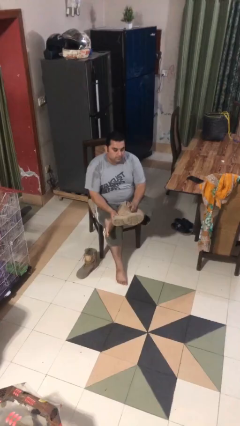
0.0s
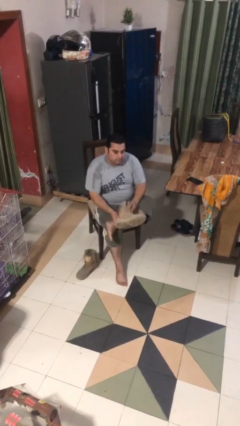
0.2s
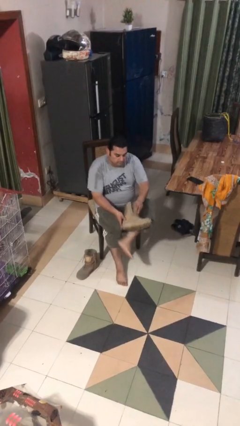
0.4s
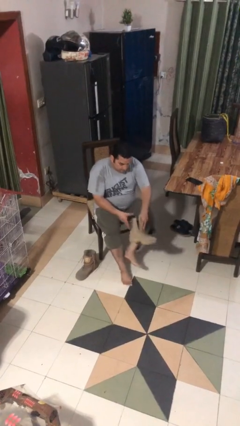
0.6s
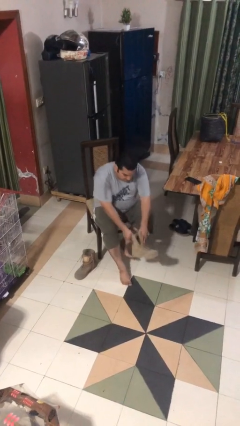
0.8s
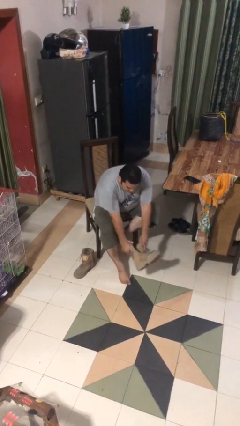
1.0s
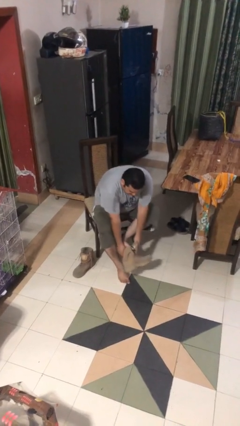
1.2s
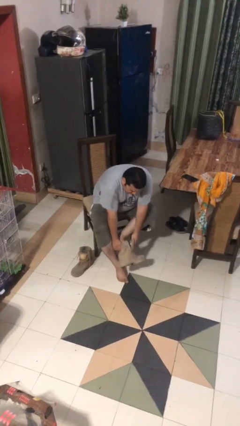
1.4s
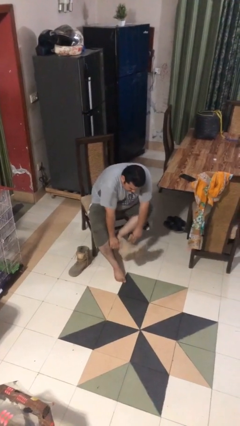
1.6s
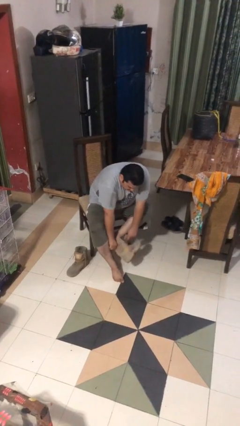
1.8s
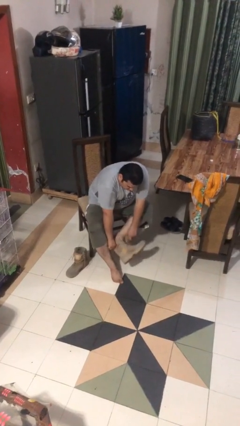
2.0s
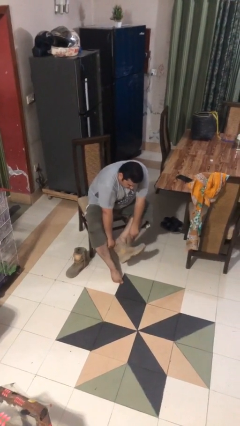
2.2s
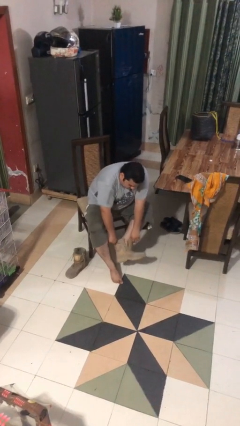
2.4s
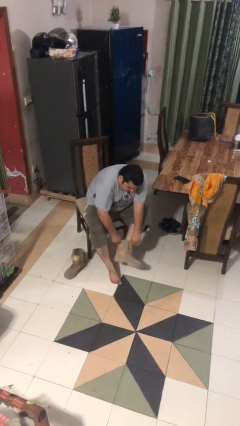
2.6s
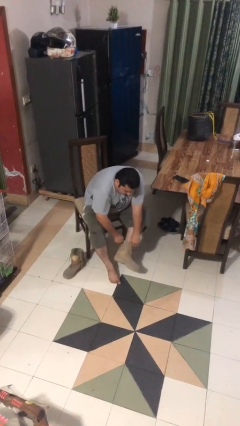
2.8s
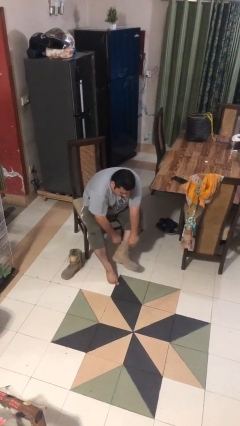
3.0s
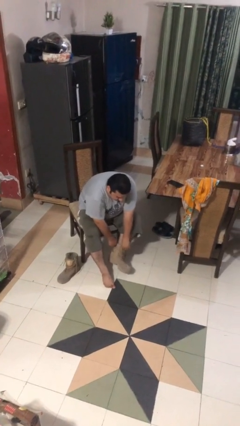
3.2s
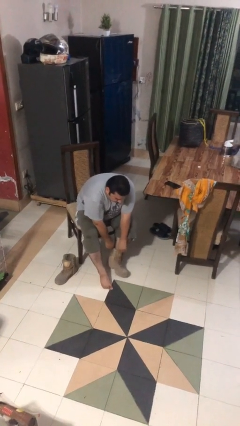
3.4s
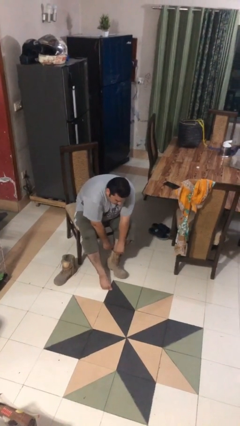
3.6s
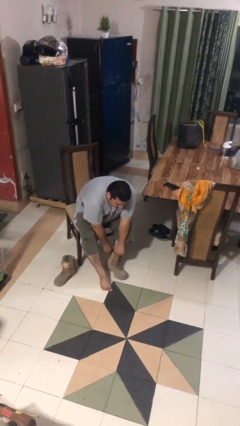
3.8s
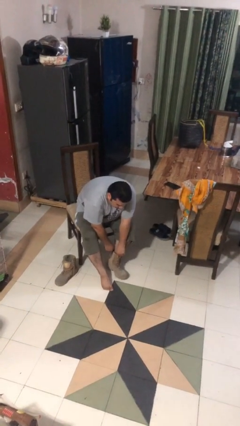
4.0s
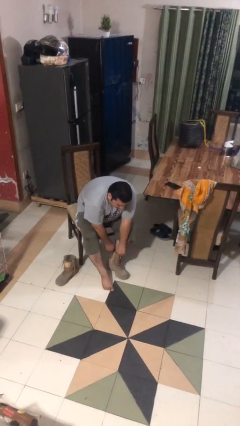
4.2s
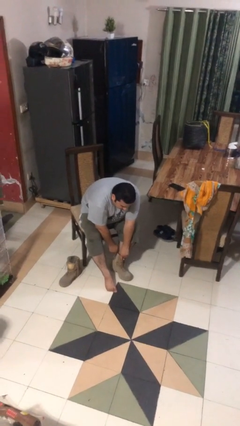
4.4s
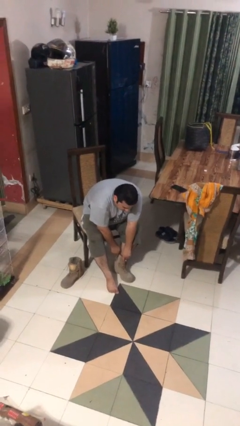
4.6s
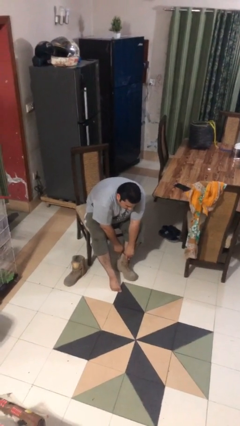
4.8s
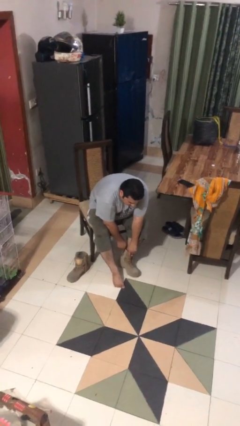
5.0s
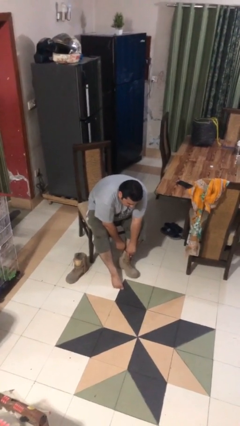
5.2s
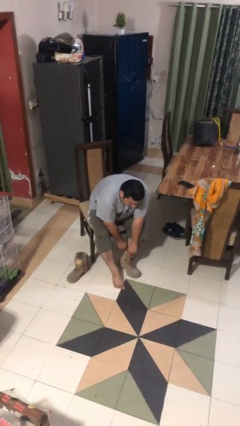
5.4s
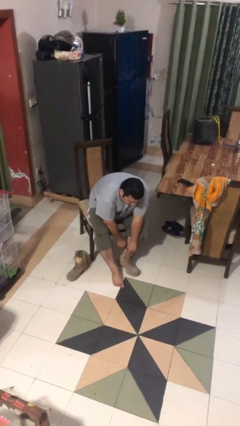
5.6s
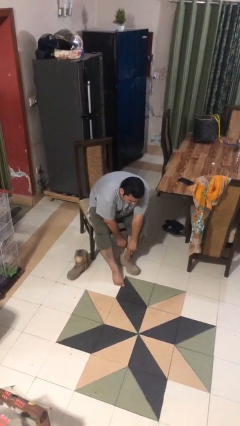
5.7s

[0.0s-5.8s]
person puts on boots

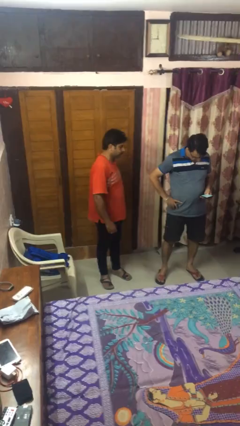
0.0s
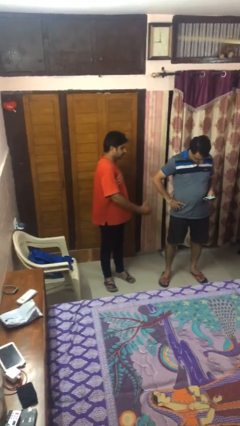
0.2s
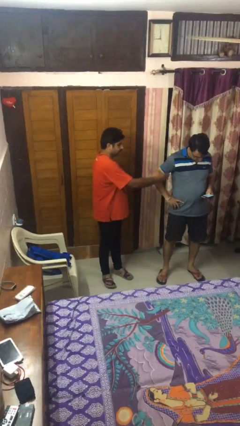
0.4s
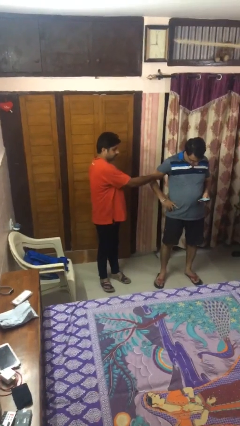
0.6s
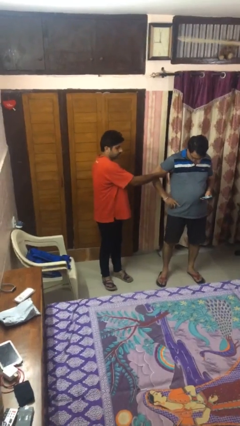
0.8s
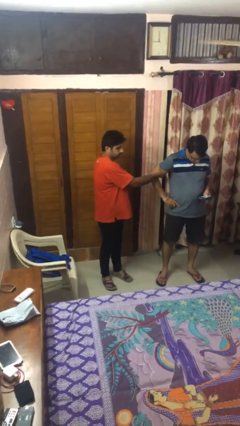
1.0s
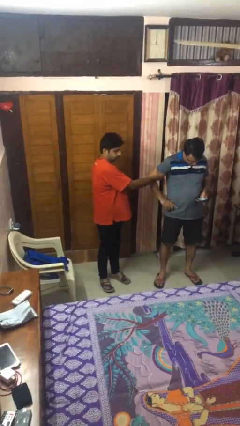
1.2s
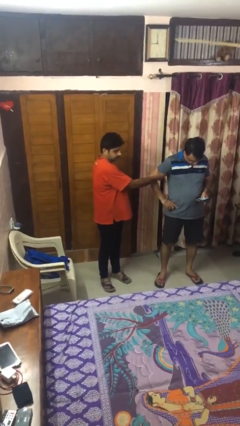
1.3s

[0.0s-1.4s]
person grabs person by bicep

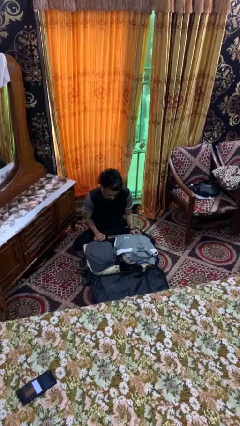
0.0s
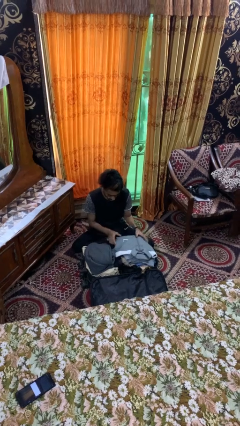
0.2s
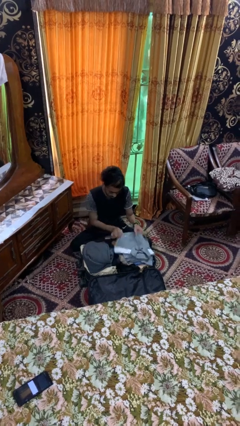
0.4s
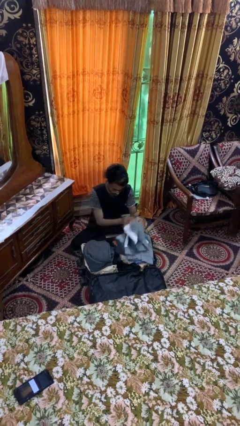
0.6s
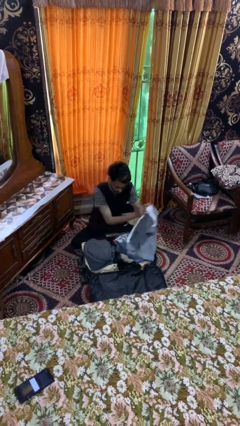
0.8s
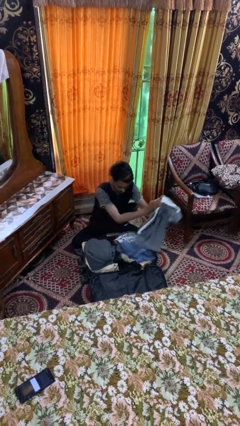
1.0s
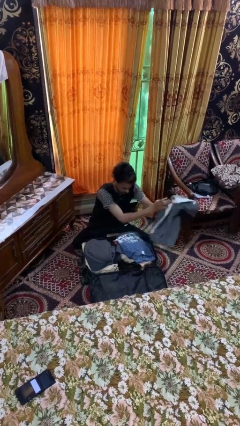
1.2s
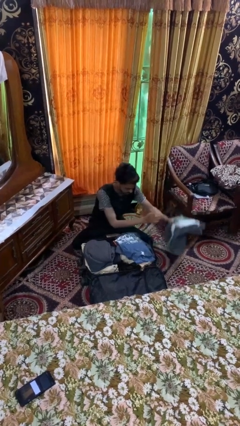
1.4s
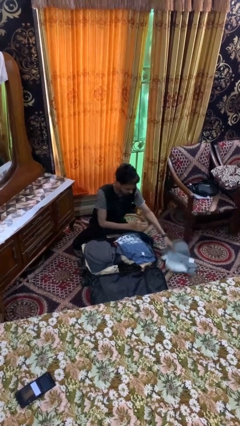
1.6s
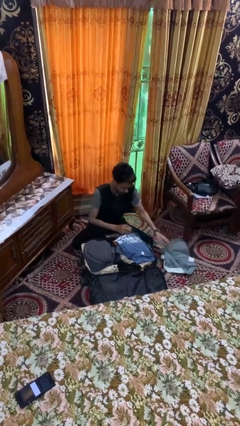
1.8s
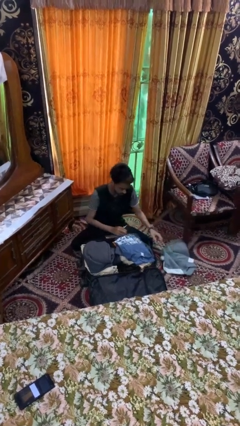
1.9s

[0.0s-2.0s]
person unloads clothes from suitcase

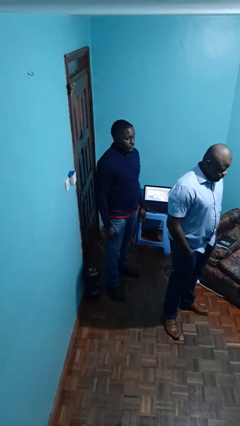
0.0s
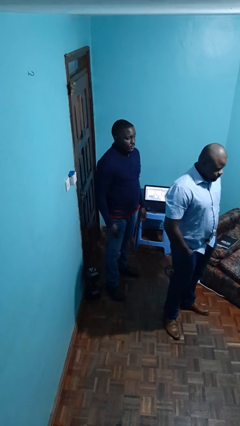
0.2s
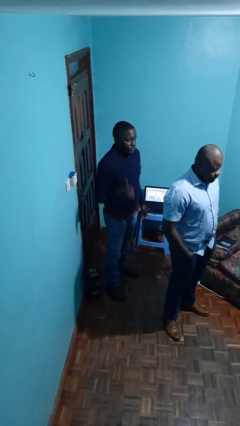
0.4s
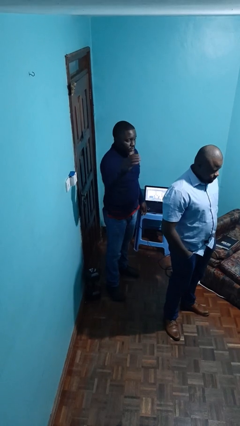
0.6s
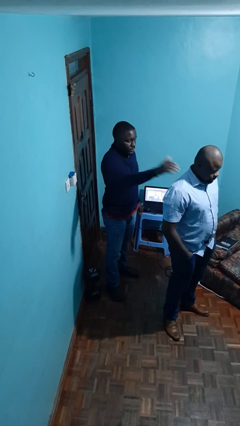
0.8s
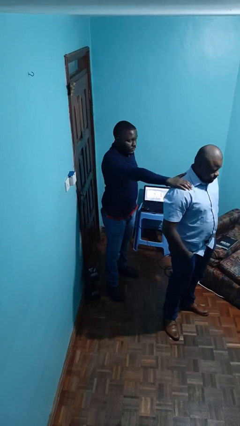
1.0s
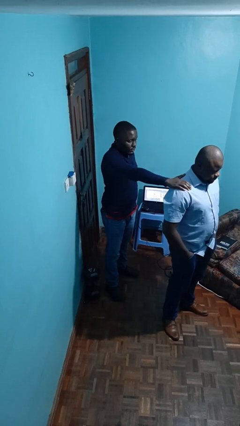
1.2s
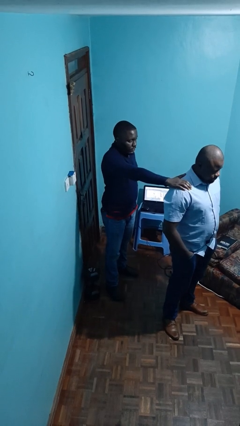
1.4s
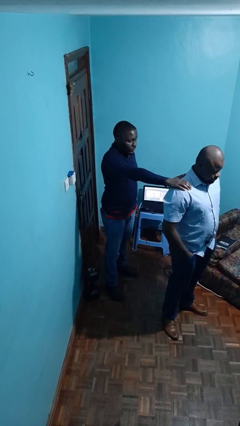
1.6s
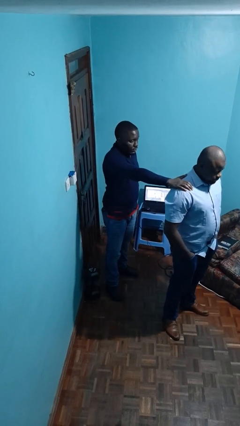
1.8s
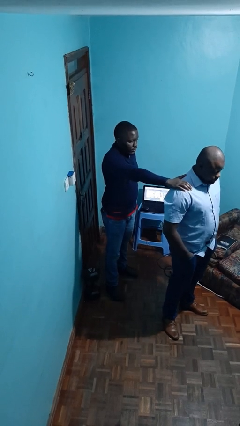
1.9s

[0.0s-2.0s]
person grabs person by shoulder

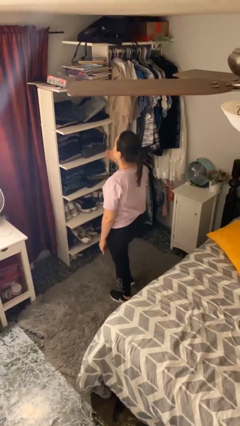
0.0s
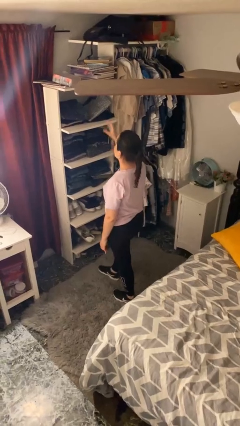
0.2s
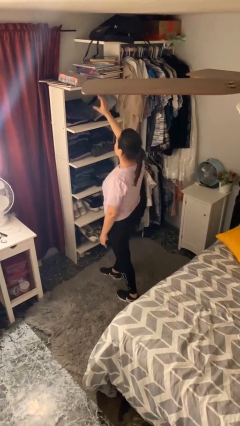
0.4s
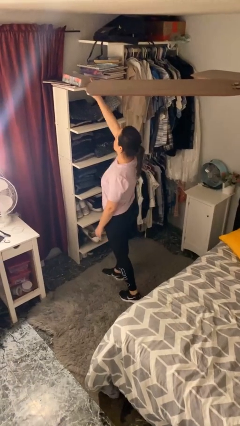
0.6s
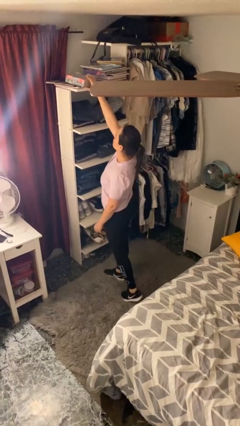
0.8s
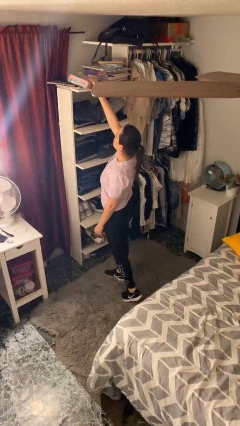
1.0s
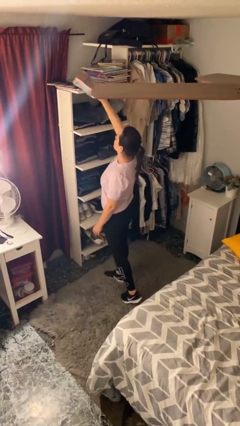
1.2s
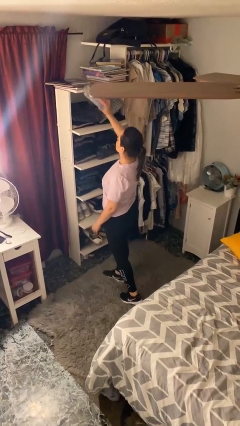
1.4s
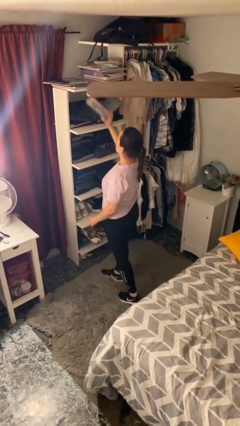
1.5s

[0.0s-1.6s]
person picks up object from shelf

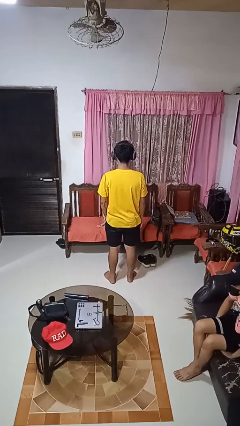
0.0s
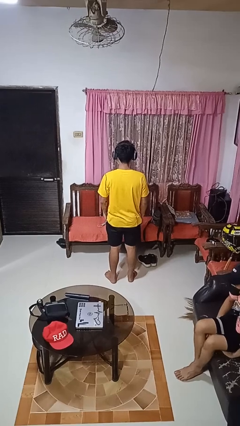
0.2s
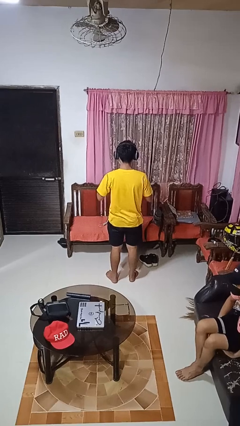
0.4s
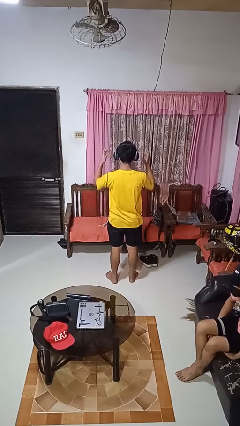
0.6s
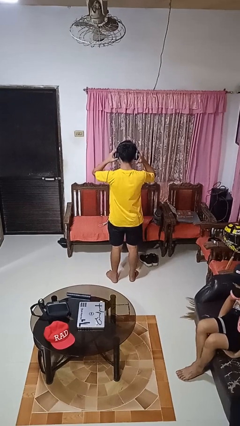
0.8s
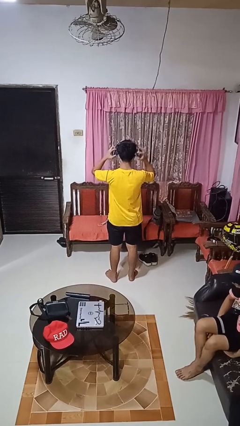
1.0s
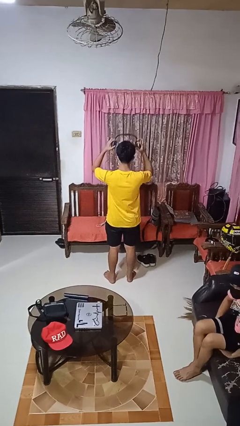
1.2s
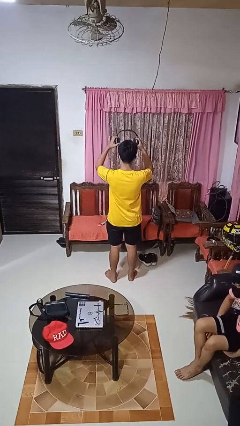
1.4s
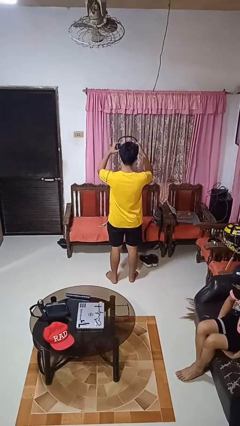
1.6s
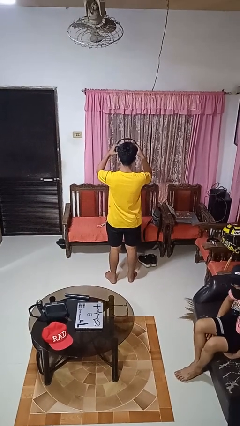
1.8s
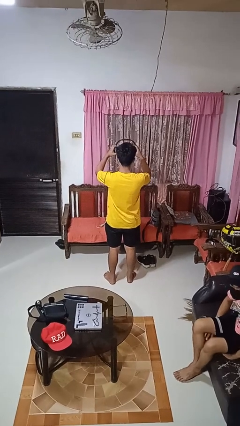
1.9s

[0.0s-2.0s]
person takes off headphones

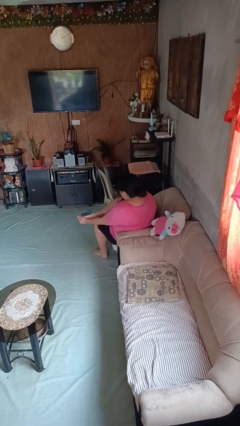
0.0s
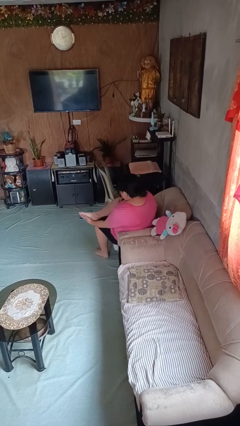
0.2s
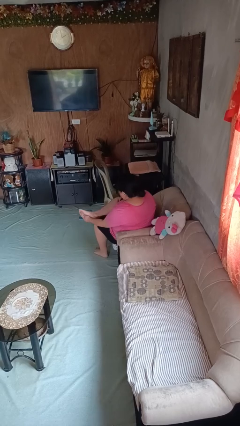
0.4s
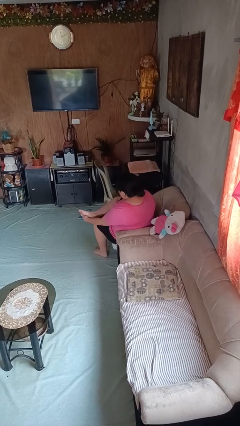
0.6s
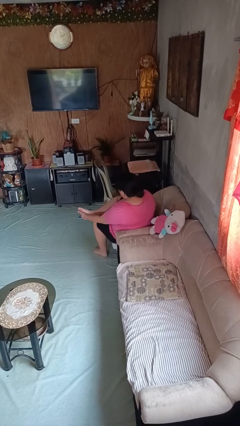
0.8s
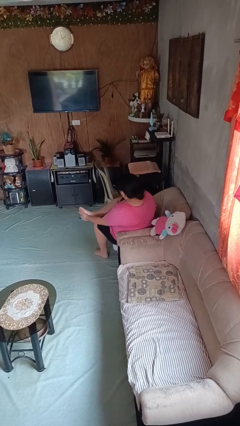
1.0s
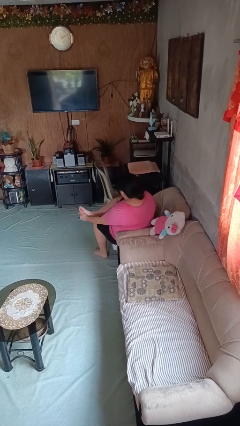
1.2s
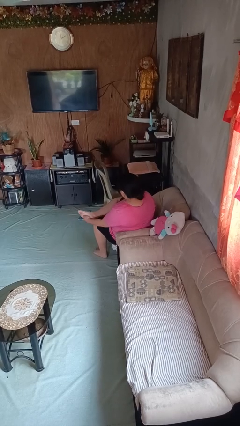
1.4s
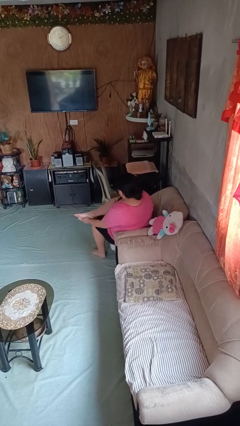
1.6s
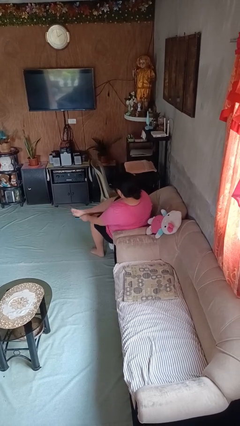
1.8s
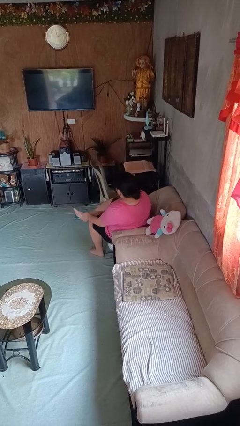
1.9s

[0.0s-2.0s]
person rubs foot
